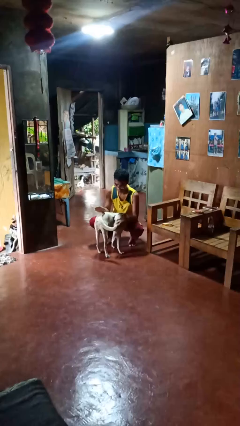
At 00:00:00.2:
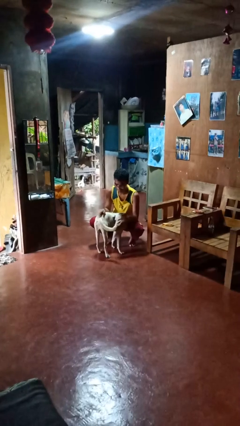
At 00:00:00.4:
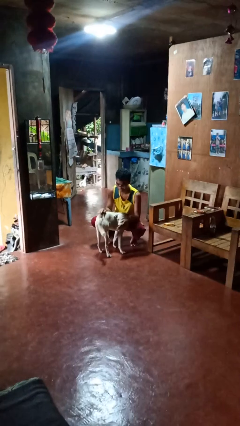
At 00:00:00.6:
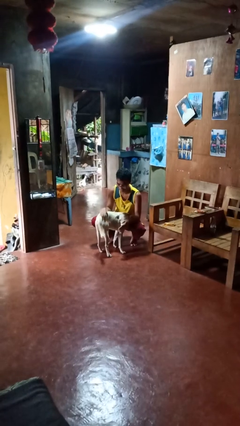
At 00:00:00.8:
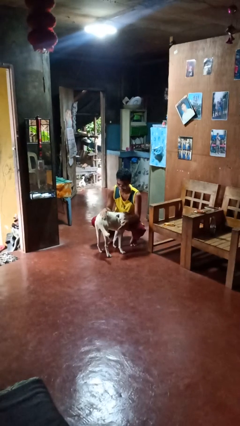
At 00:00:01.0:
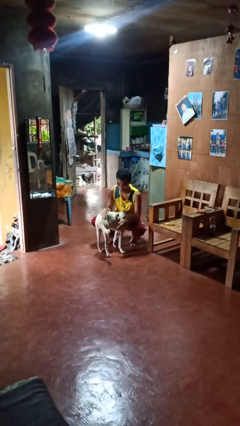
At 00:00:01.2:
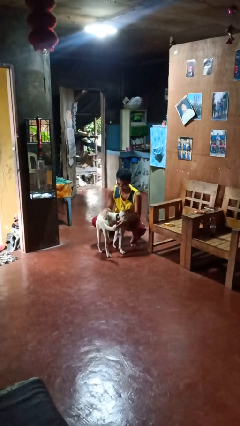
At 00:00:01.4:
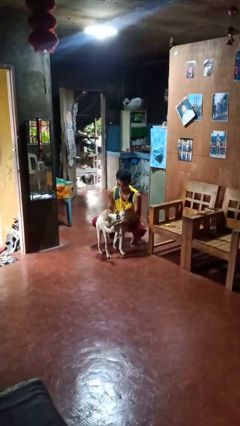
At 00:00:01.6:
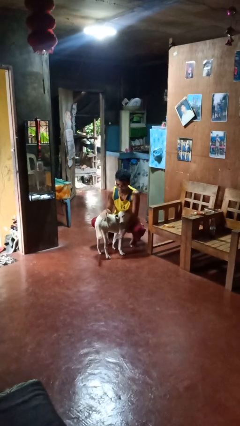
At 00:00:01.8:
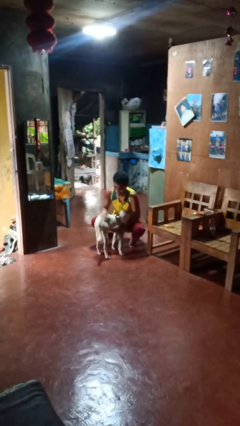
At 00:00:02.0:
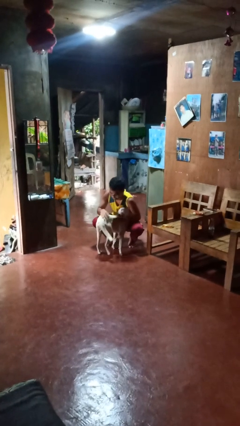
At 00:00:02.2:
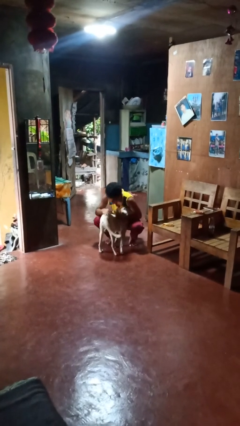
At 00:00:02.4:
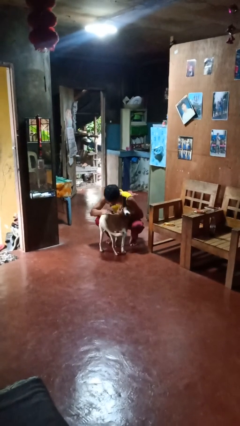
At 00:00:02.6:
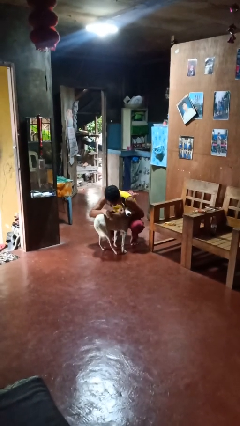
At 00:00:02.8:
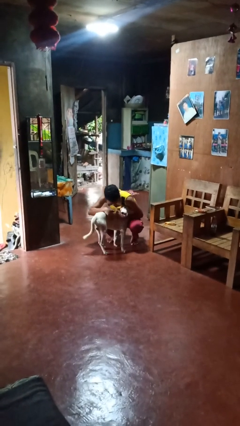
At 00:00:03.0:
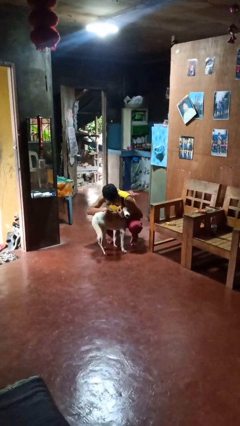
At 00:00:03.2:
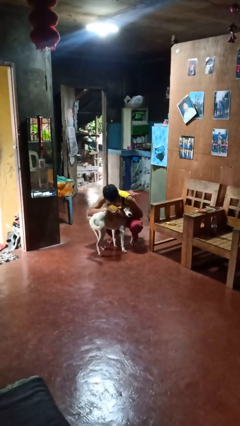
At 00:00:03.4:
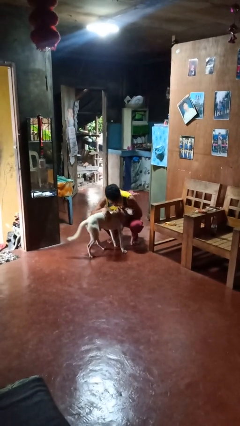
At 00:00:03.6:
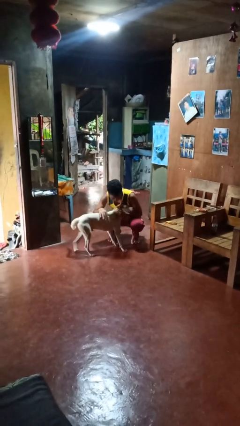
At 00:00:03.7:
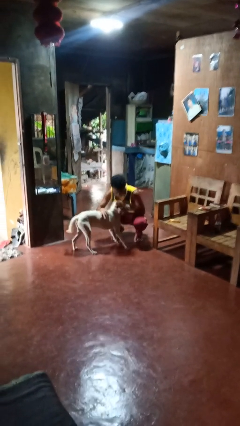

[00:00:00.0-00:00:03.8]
person hugs dog

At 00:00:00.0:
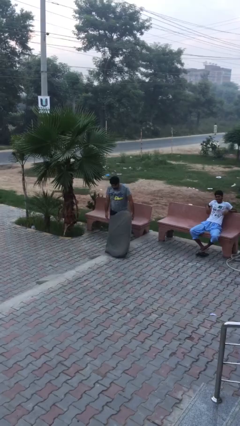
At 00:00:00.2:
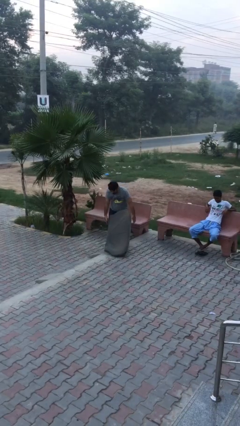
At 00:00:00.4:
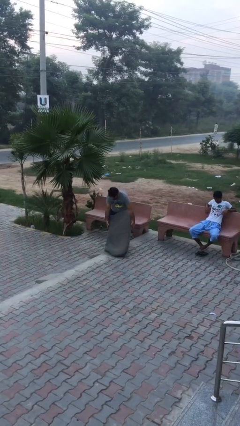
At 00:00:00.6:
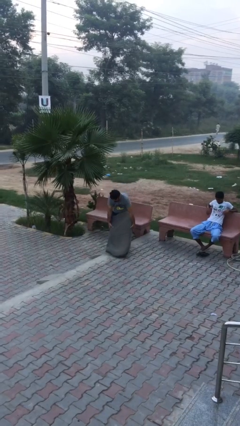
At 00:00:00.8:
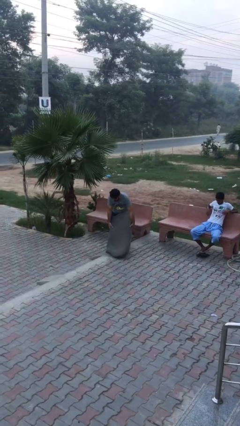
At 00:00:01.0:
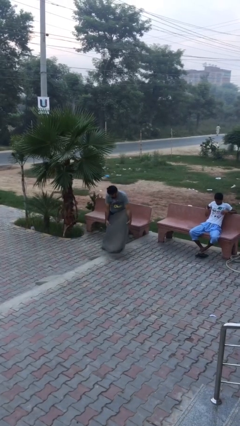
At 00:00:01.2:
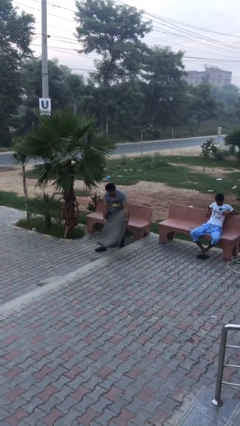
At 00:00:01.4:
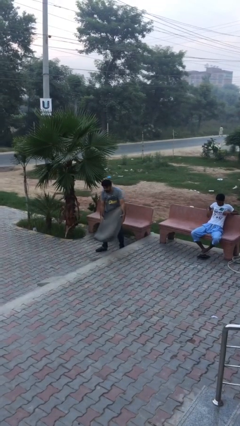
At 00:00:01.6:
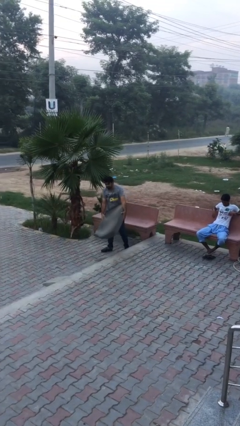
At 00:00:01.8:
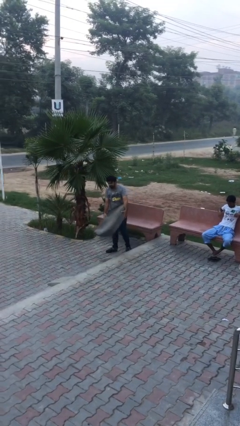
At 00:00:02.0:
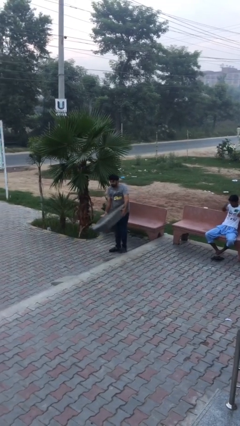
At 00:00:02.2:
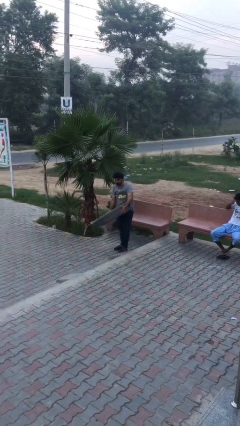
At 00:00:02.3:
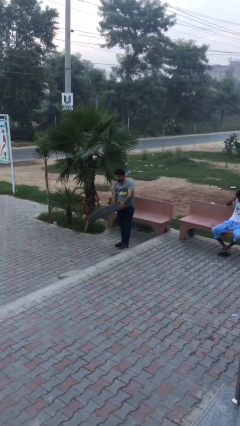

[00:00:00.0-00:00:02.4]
person picks up object from floor

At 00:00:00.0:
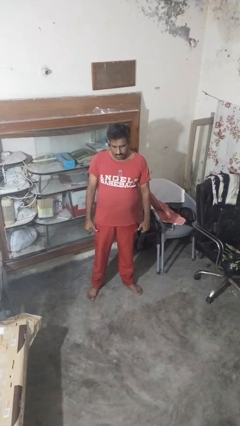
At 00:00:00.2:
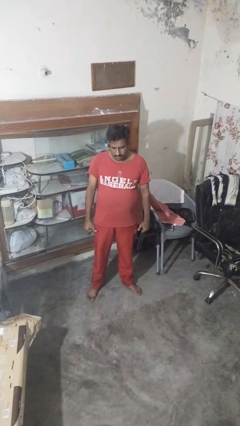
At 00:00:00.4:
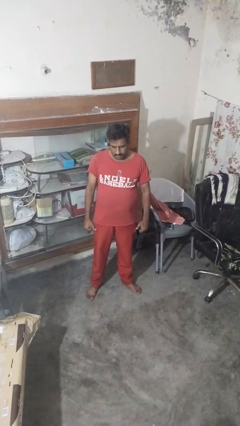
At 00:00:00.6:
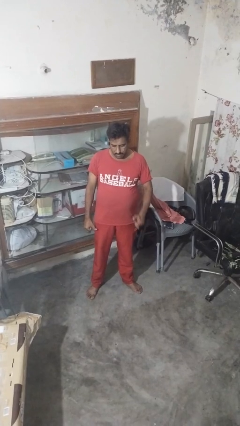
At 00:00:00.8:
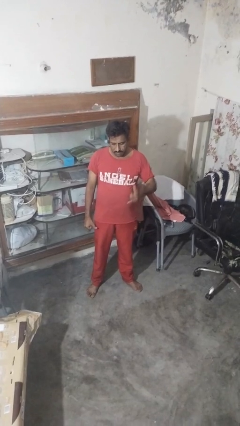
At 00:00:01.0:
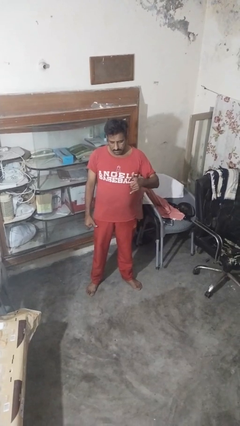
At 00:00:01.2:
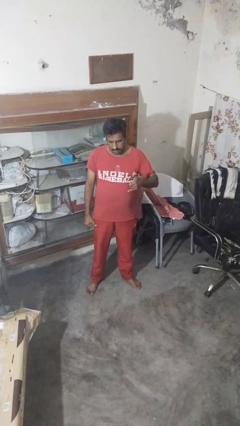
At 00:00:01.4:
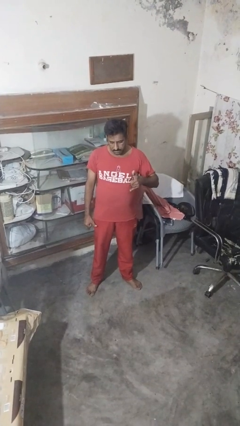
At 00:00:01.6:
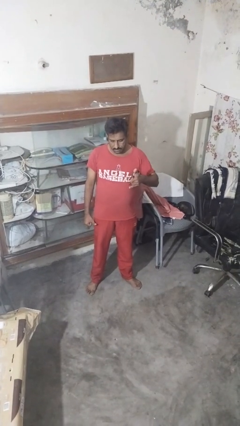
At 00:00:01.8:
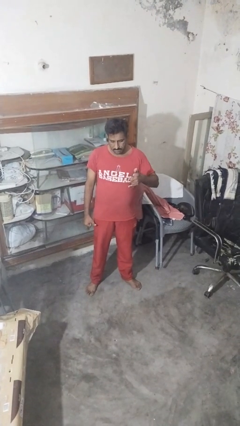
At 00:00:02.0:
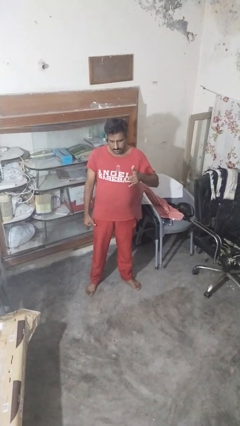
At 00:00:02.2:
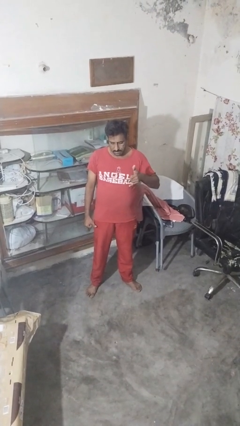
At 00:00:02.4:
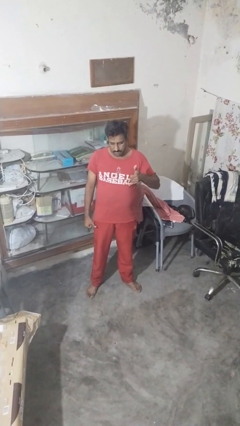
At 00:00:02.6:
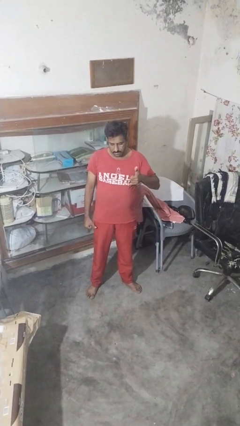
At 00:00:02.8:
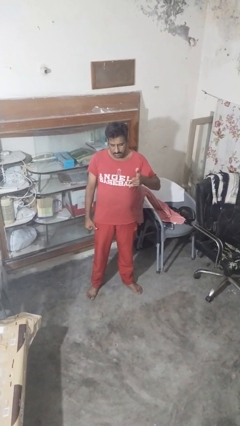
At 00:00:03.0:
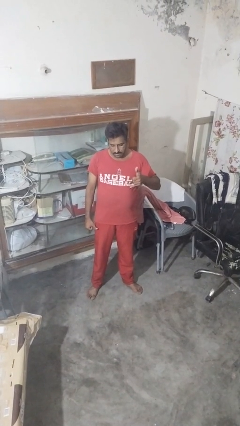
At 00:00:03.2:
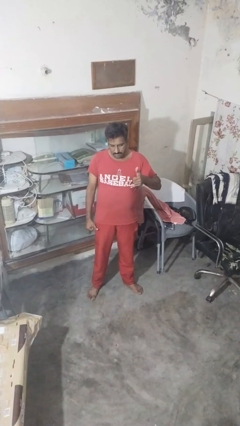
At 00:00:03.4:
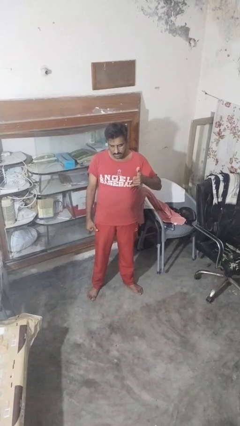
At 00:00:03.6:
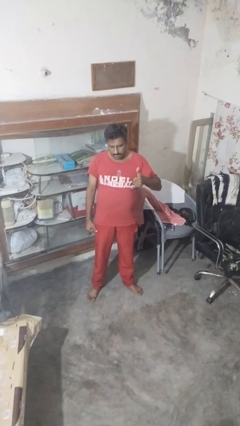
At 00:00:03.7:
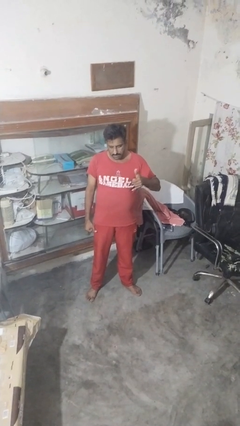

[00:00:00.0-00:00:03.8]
person gestures hang loose

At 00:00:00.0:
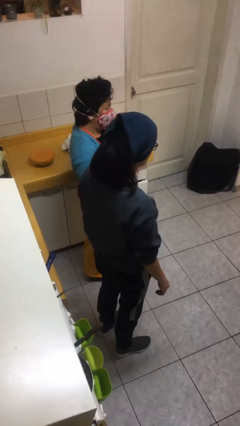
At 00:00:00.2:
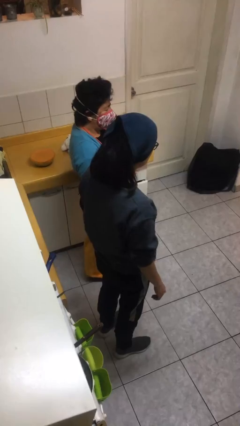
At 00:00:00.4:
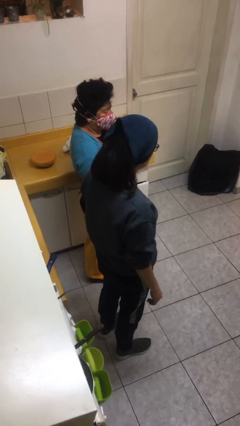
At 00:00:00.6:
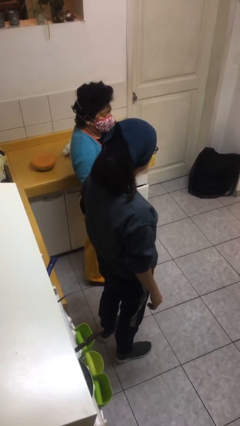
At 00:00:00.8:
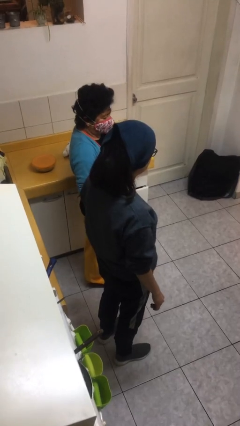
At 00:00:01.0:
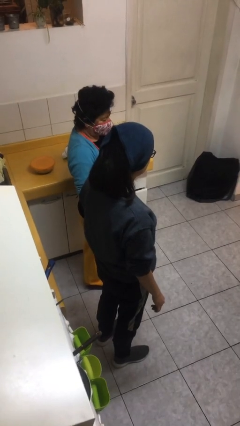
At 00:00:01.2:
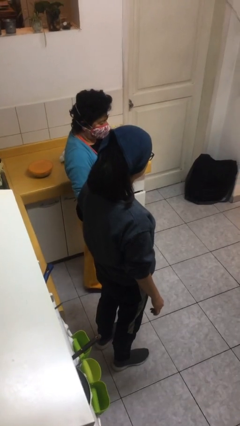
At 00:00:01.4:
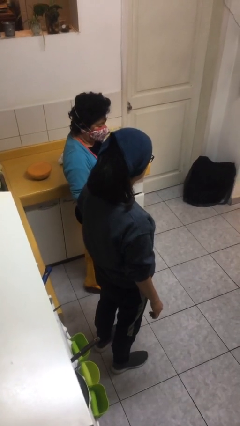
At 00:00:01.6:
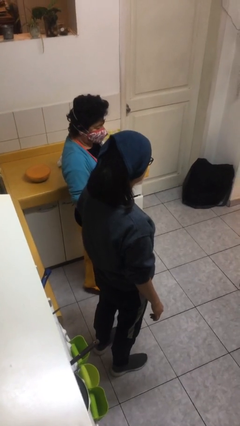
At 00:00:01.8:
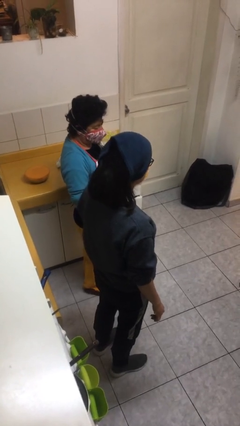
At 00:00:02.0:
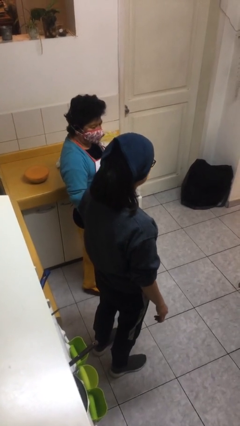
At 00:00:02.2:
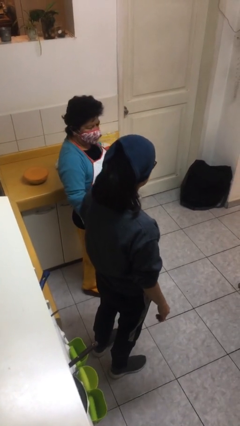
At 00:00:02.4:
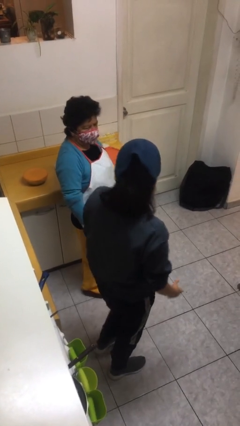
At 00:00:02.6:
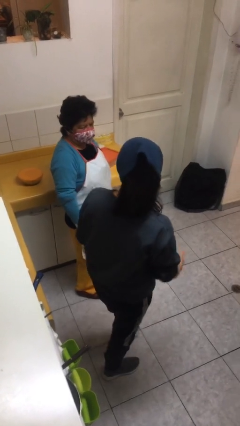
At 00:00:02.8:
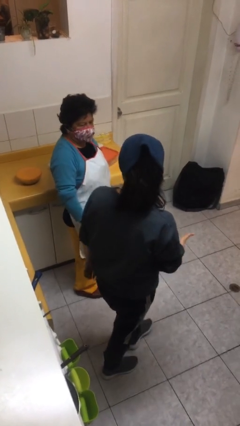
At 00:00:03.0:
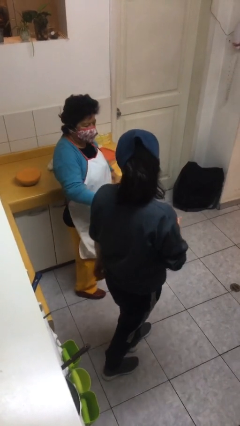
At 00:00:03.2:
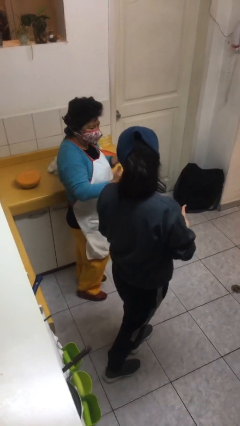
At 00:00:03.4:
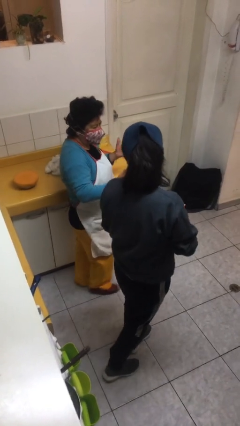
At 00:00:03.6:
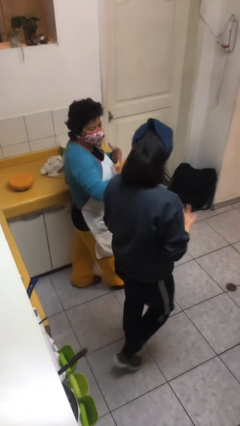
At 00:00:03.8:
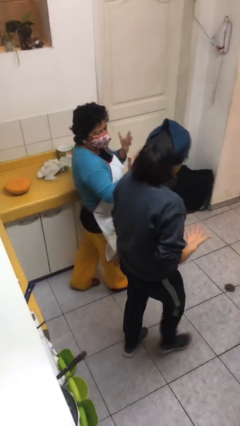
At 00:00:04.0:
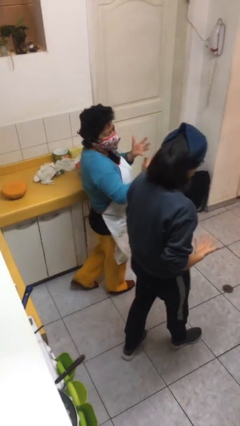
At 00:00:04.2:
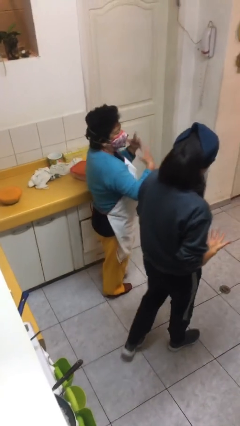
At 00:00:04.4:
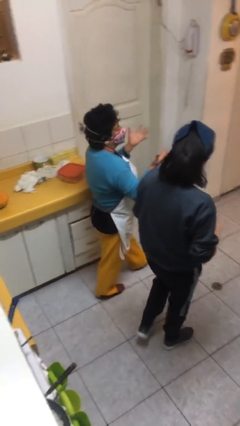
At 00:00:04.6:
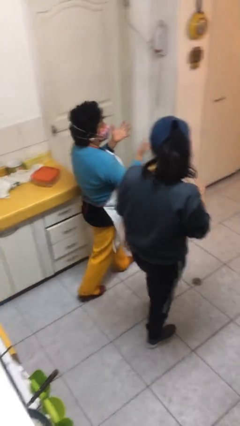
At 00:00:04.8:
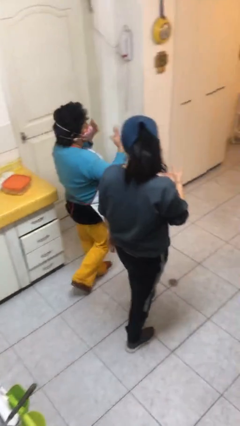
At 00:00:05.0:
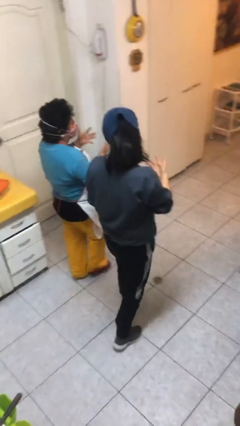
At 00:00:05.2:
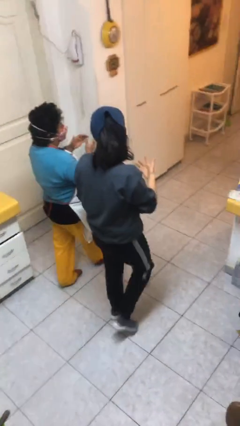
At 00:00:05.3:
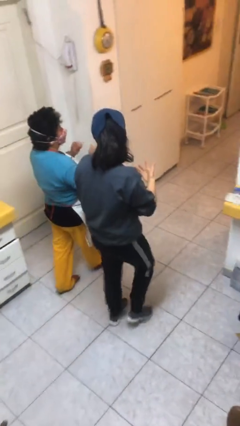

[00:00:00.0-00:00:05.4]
person talks to person

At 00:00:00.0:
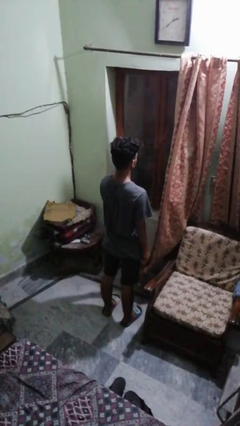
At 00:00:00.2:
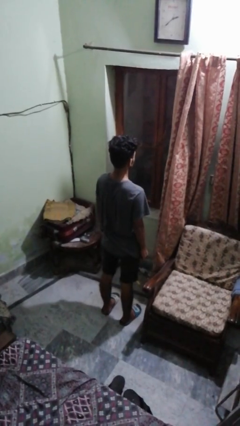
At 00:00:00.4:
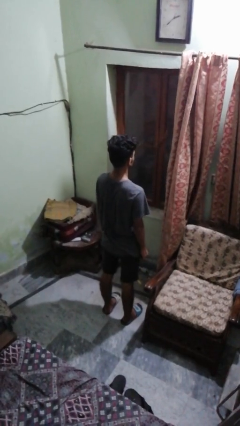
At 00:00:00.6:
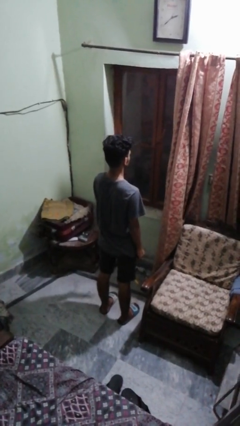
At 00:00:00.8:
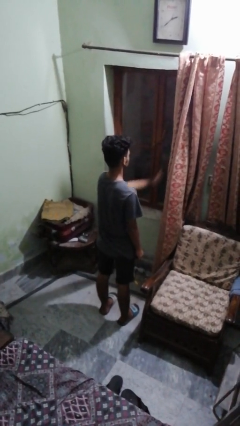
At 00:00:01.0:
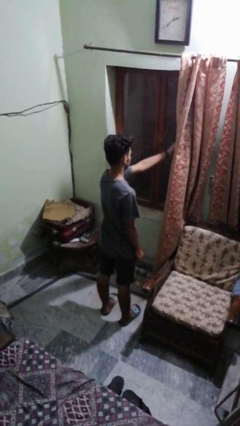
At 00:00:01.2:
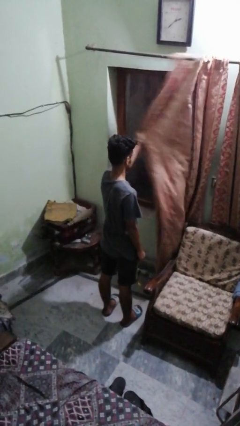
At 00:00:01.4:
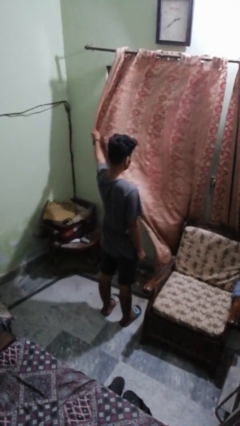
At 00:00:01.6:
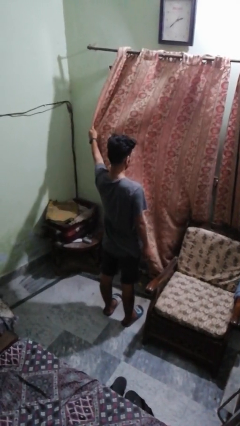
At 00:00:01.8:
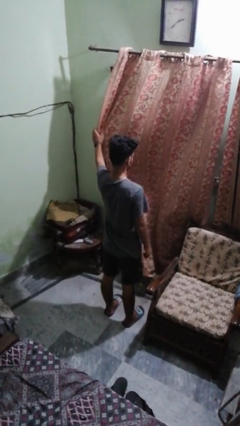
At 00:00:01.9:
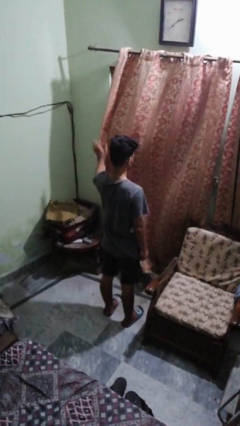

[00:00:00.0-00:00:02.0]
person closes curtains
